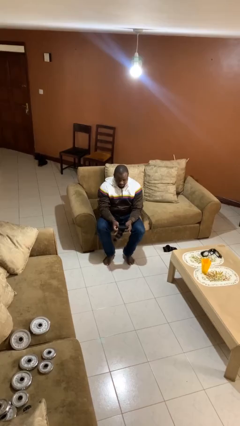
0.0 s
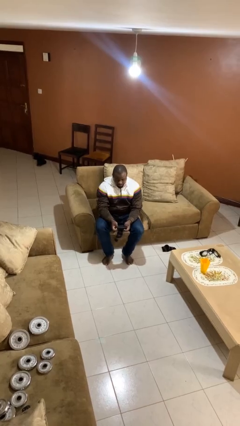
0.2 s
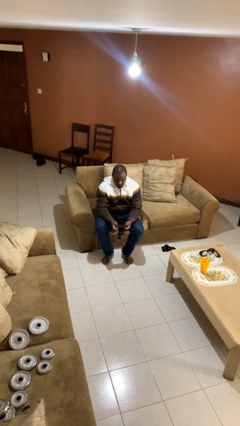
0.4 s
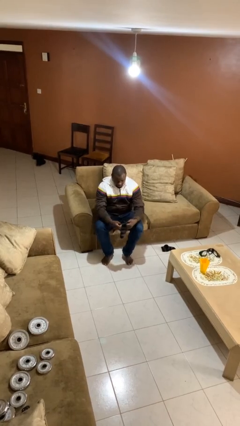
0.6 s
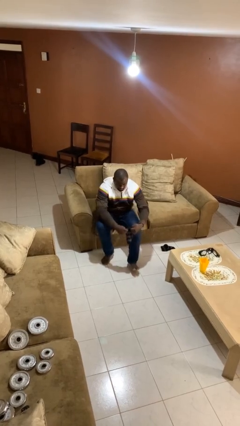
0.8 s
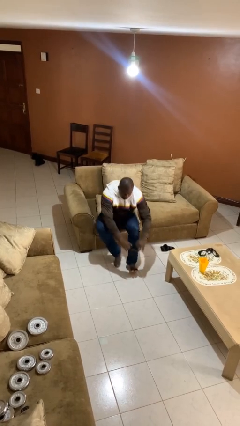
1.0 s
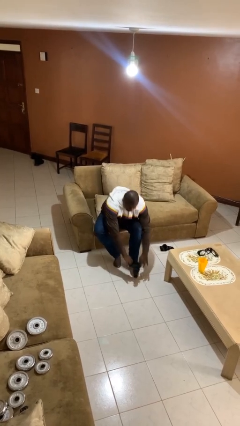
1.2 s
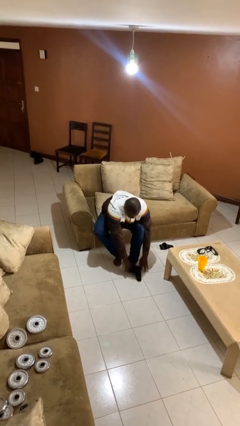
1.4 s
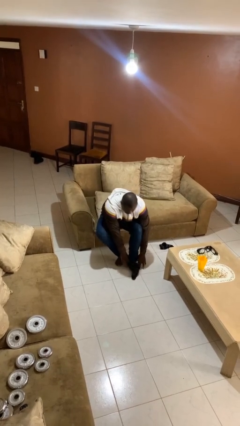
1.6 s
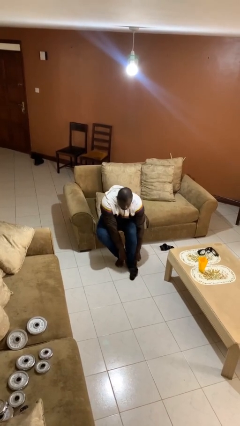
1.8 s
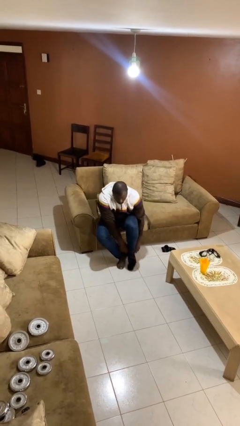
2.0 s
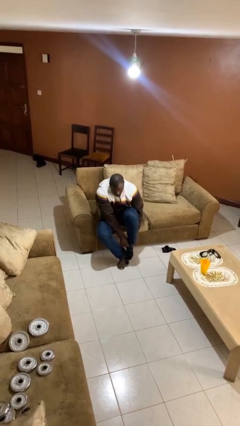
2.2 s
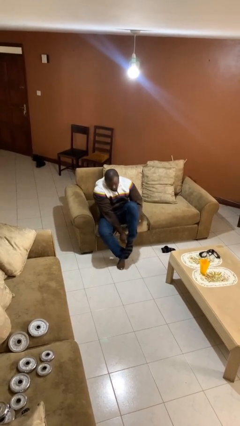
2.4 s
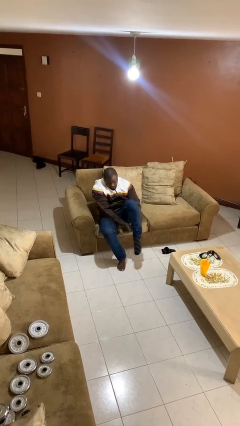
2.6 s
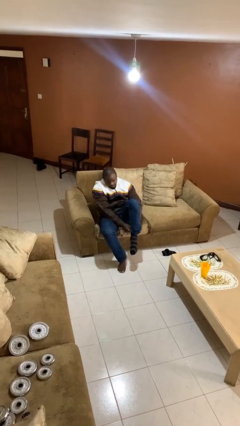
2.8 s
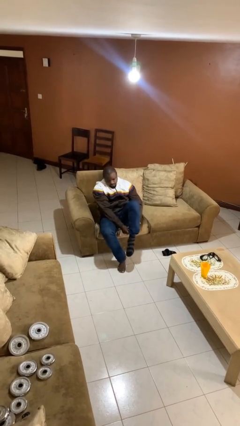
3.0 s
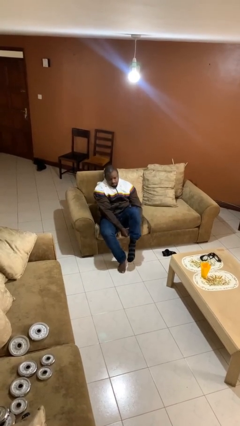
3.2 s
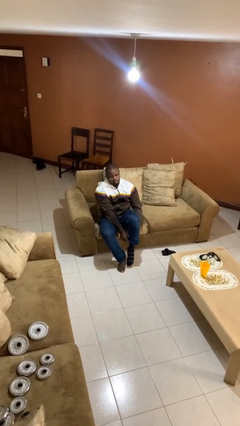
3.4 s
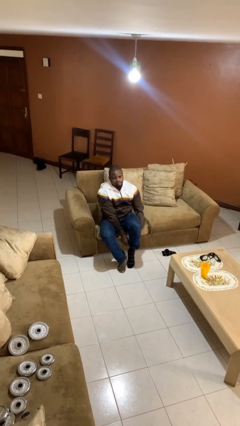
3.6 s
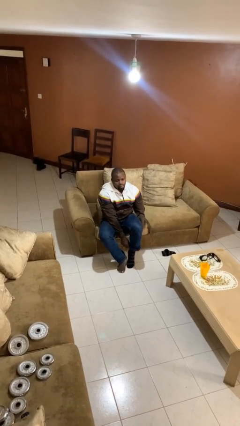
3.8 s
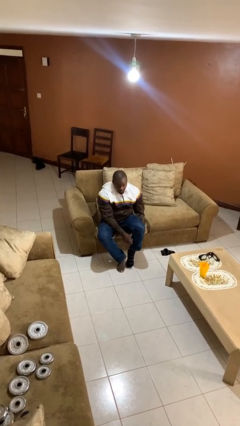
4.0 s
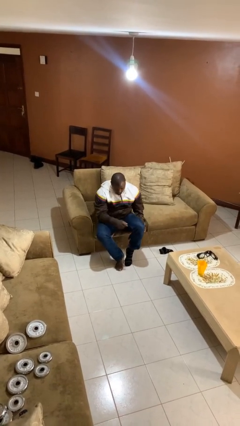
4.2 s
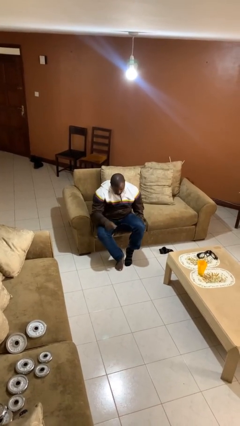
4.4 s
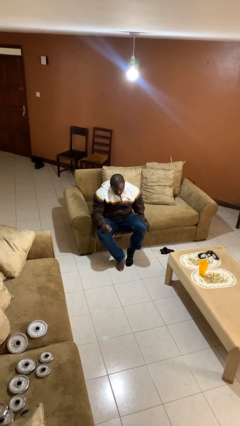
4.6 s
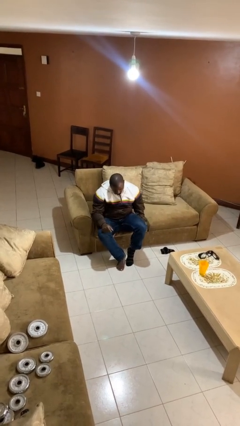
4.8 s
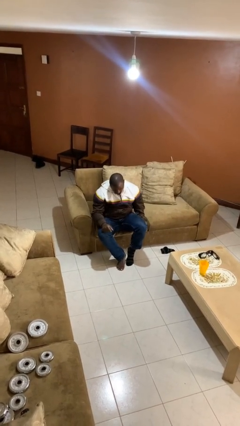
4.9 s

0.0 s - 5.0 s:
person puts on socks

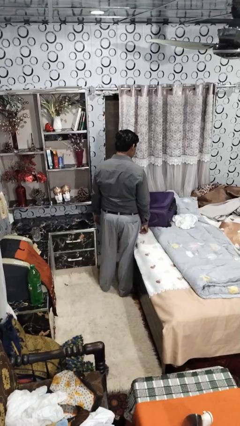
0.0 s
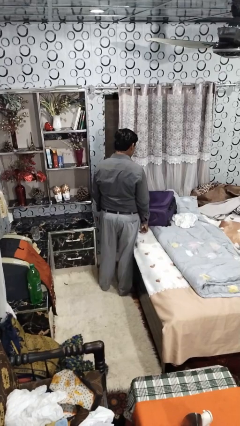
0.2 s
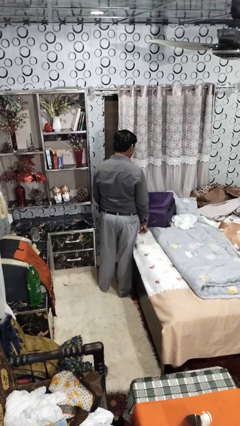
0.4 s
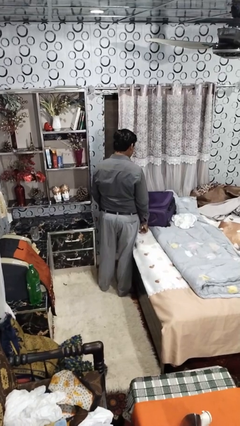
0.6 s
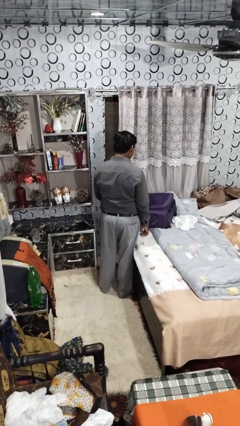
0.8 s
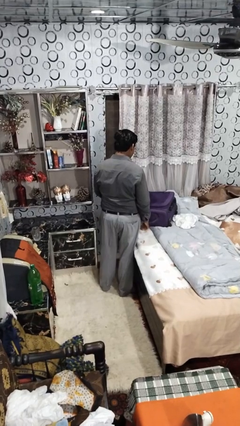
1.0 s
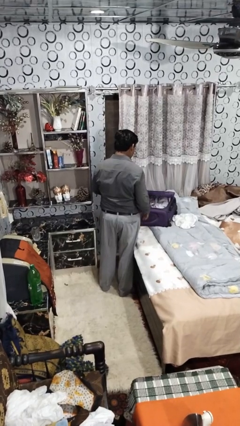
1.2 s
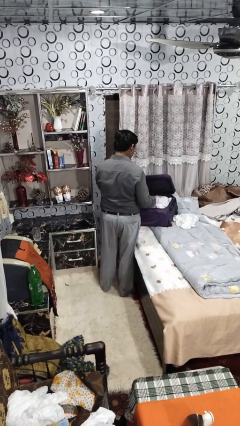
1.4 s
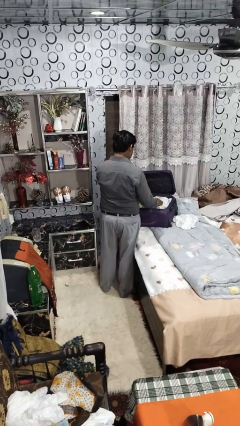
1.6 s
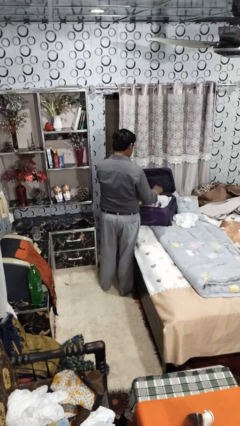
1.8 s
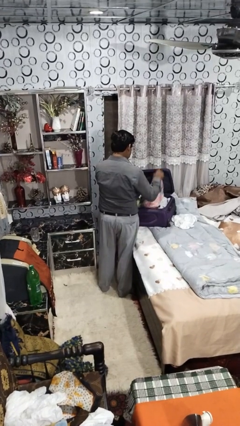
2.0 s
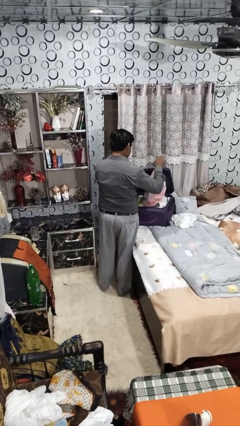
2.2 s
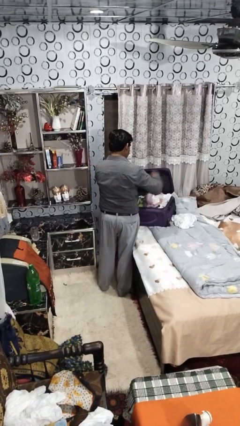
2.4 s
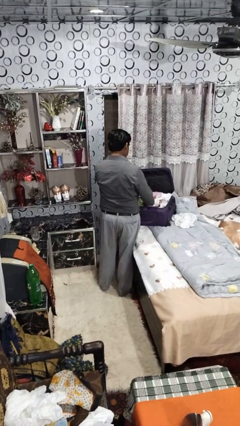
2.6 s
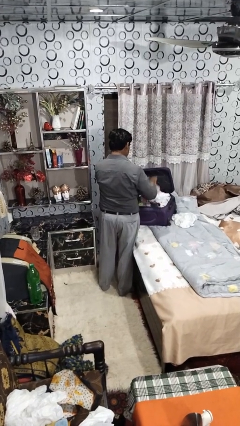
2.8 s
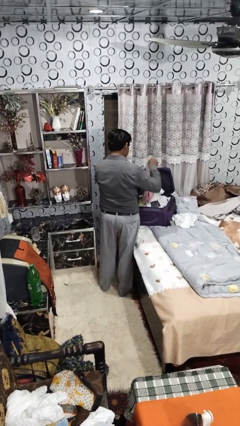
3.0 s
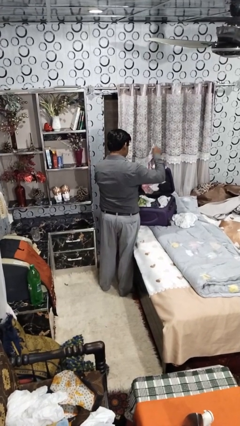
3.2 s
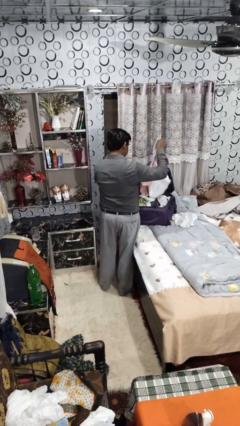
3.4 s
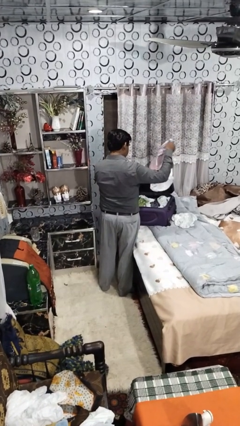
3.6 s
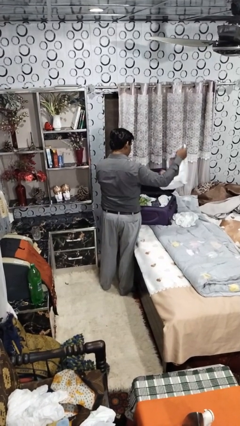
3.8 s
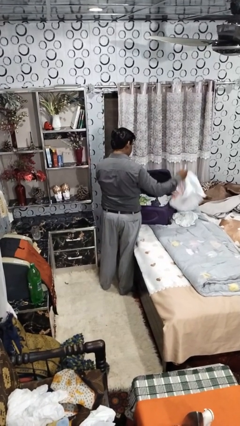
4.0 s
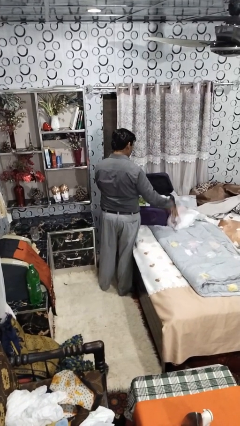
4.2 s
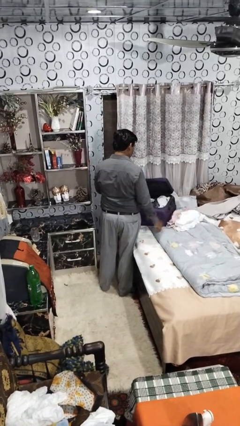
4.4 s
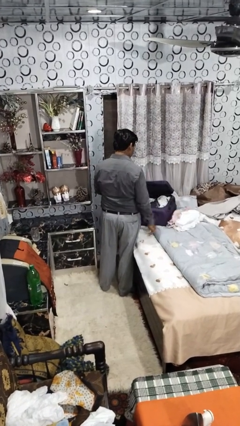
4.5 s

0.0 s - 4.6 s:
person unloads clothes from suitcase

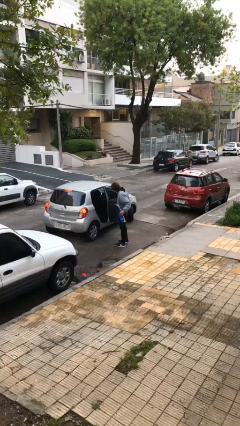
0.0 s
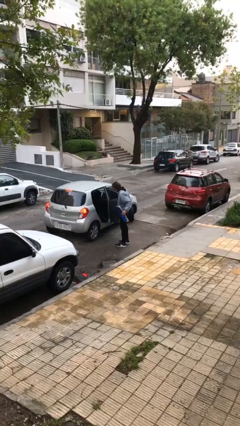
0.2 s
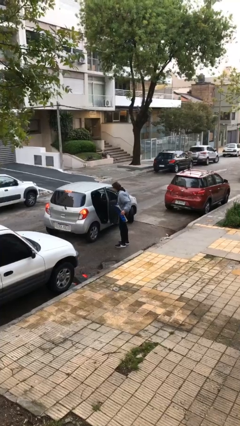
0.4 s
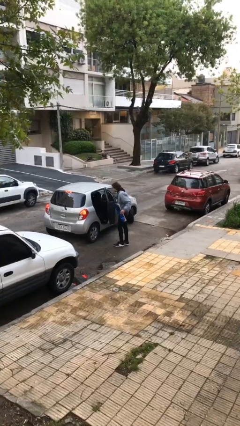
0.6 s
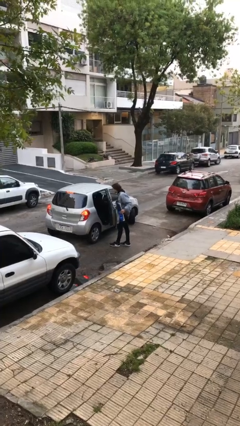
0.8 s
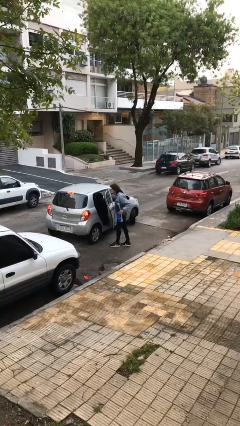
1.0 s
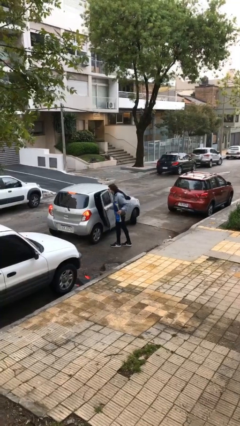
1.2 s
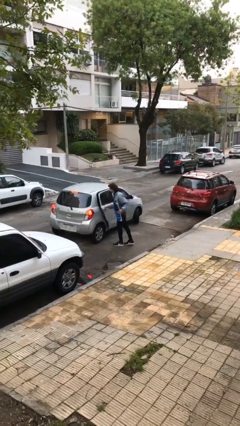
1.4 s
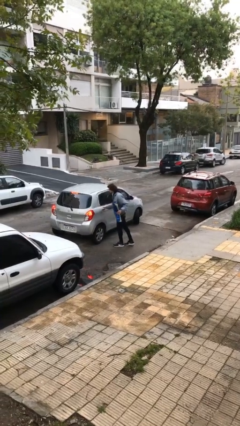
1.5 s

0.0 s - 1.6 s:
person closes car door

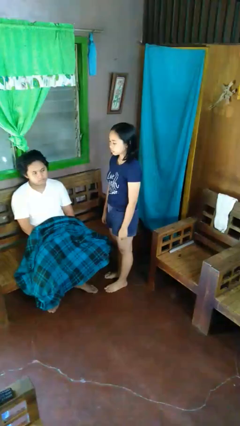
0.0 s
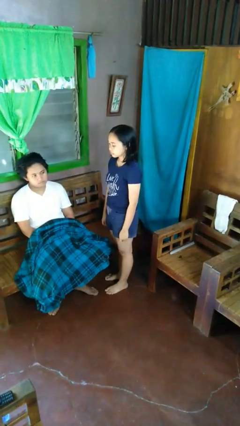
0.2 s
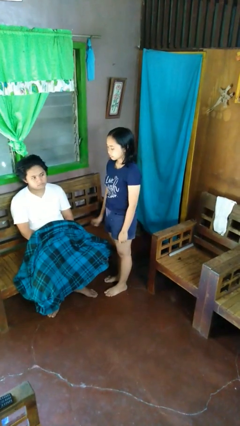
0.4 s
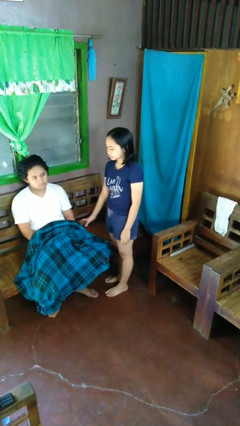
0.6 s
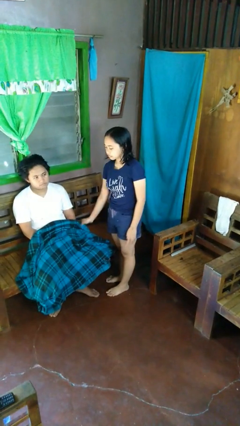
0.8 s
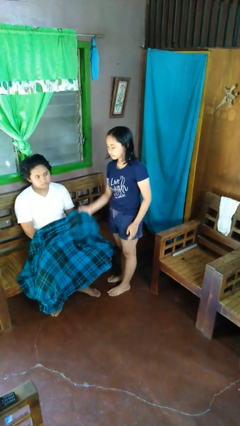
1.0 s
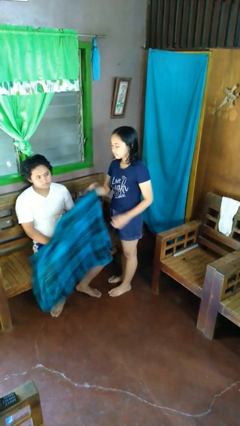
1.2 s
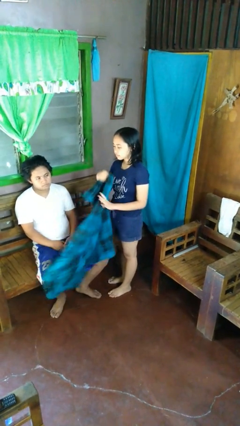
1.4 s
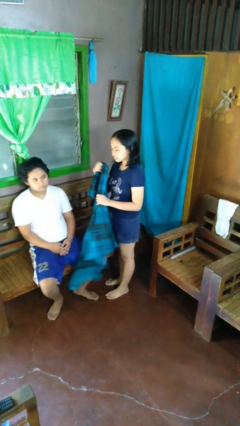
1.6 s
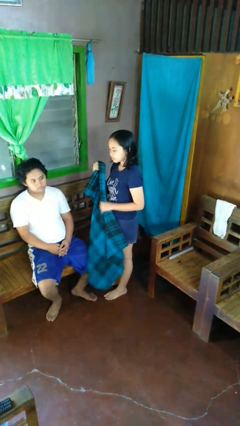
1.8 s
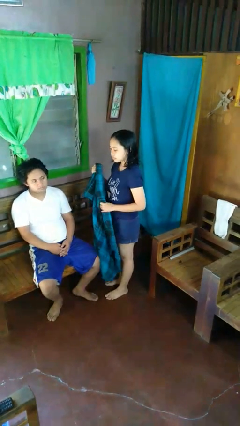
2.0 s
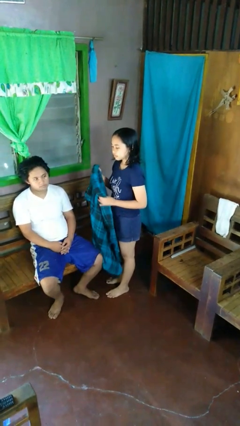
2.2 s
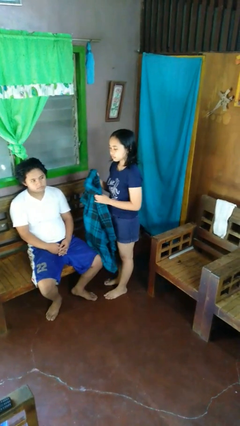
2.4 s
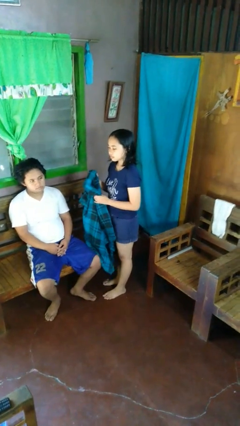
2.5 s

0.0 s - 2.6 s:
person uncovers friend with blanket

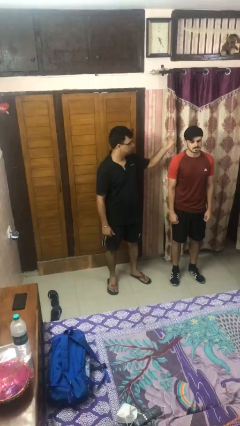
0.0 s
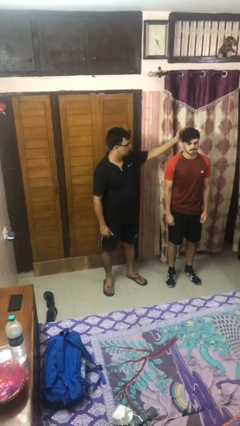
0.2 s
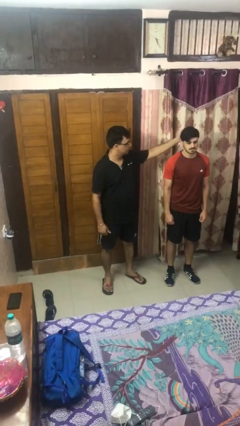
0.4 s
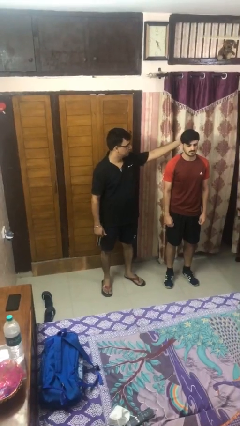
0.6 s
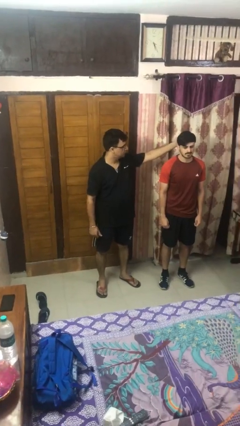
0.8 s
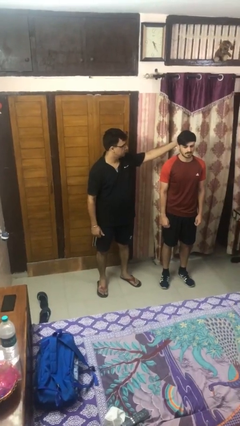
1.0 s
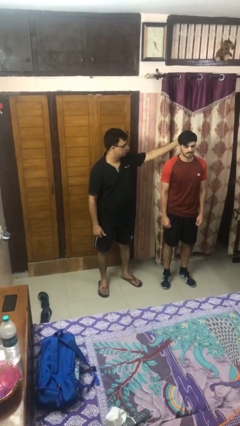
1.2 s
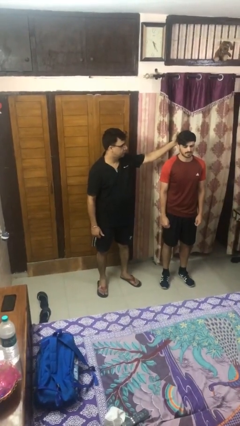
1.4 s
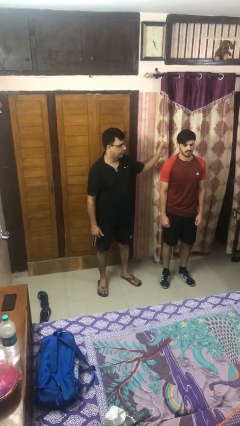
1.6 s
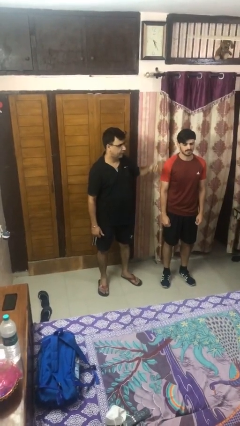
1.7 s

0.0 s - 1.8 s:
person grabs person by hair

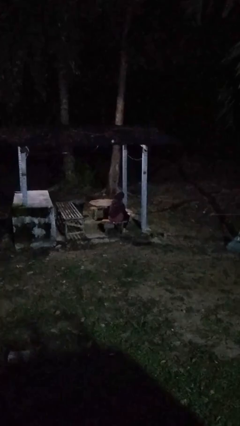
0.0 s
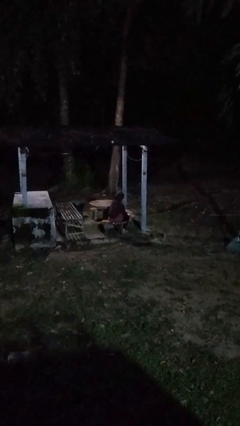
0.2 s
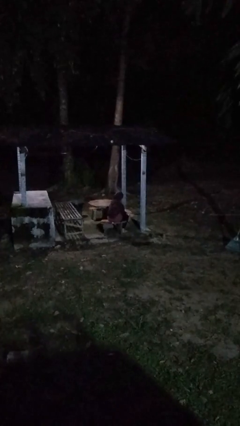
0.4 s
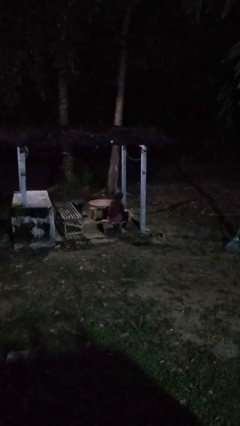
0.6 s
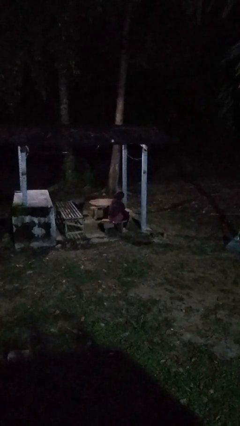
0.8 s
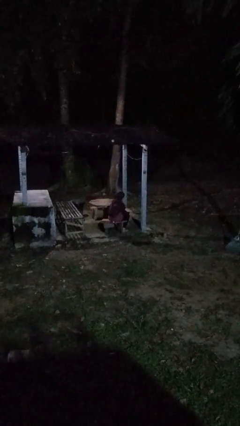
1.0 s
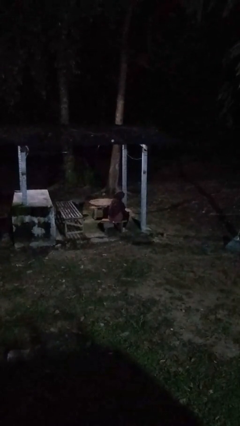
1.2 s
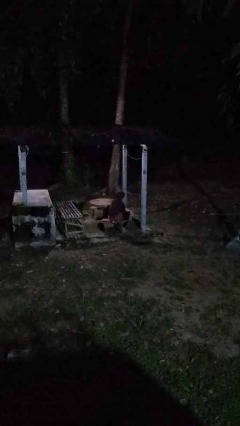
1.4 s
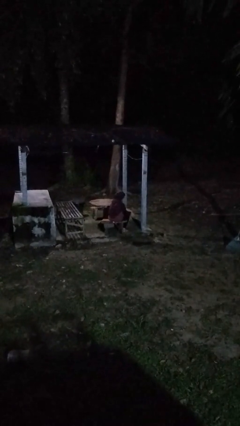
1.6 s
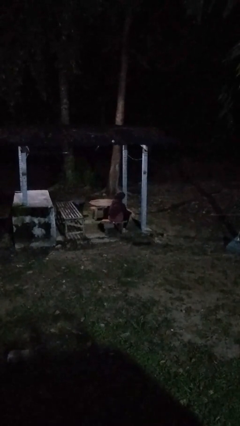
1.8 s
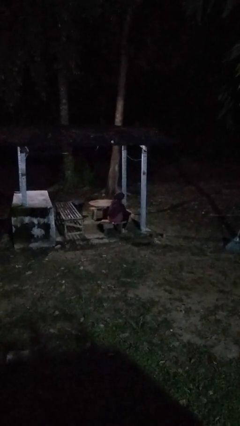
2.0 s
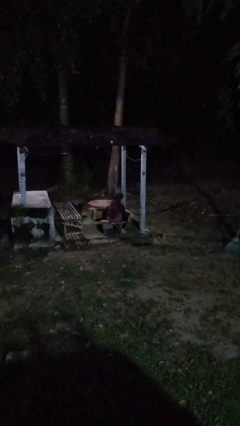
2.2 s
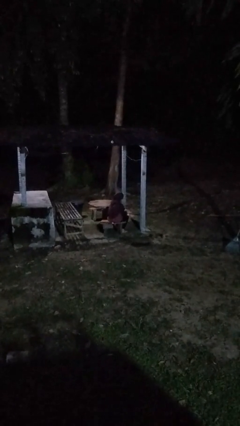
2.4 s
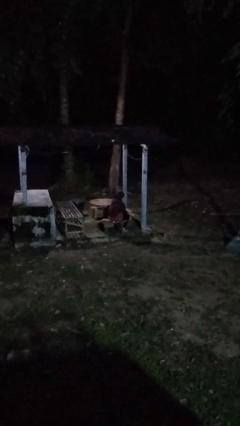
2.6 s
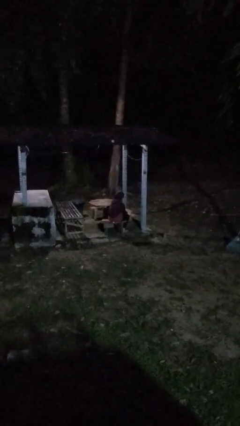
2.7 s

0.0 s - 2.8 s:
person rubs foot
